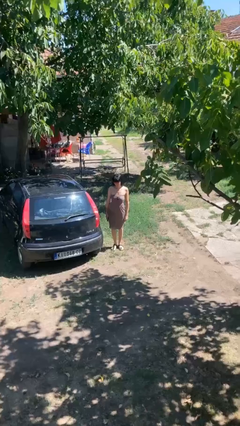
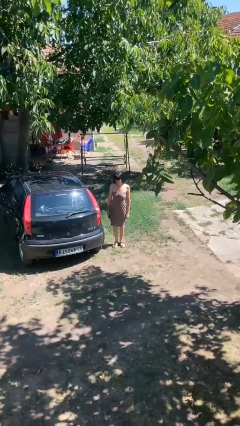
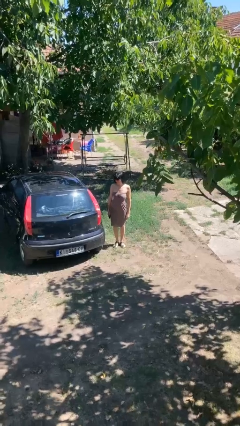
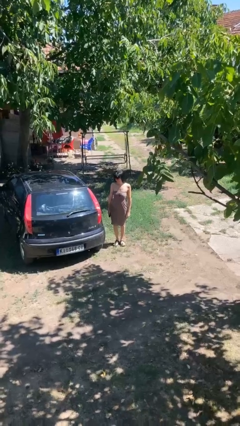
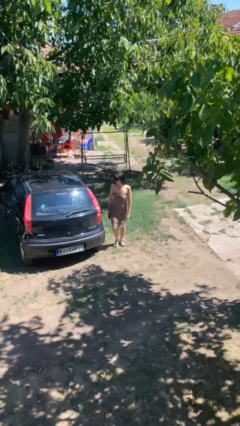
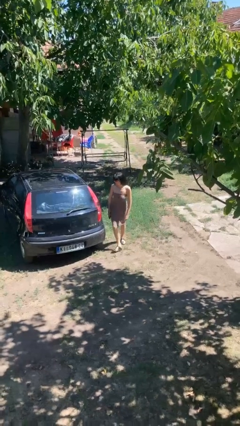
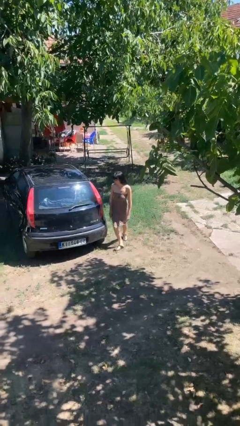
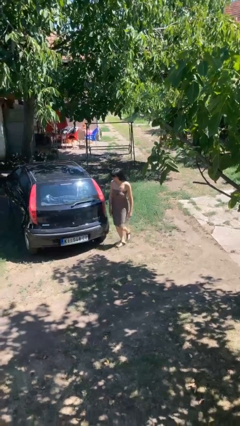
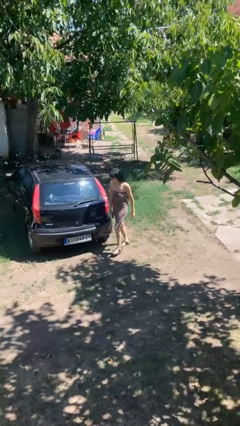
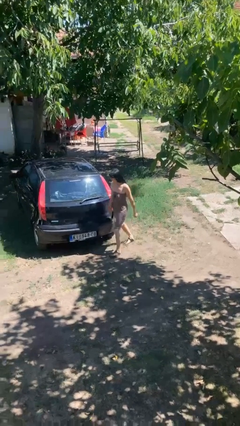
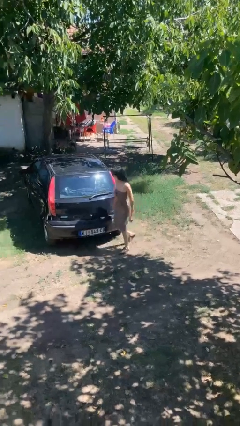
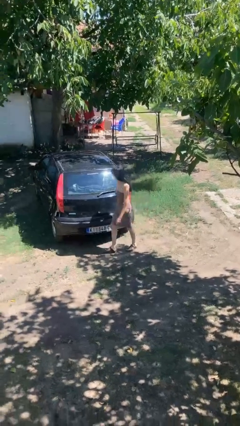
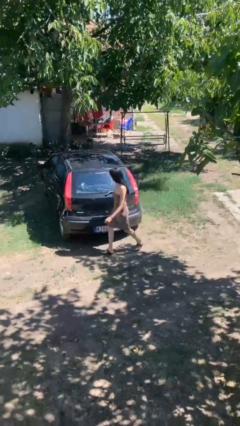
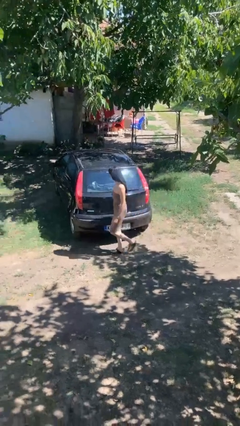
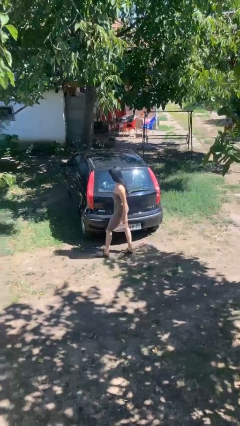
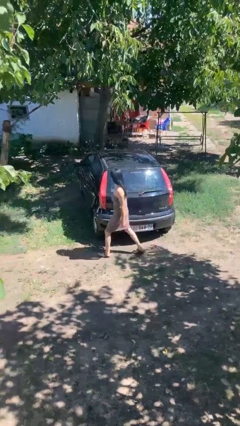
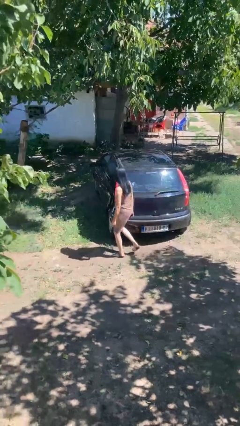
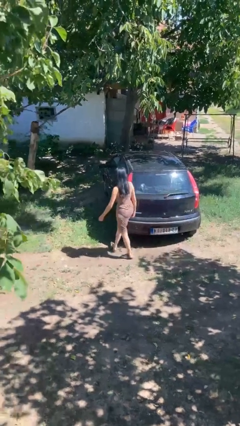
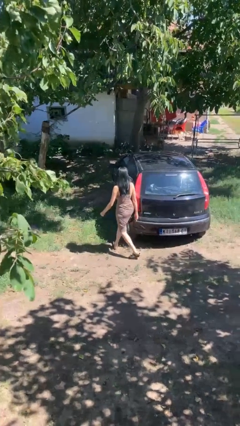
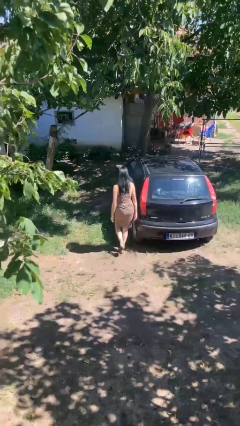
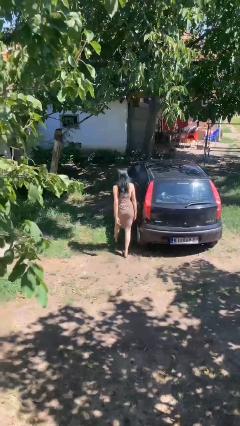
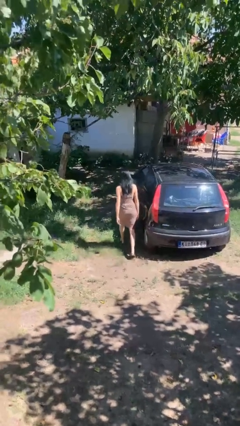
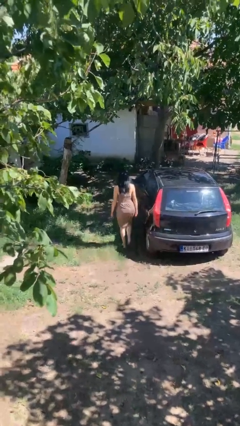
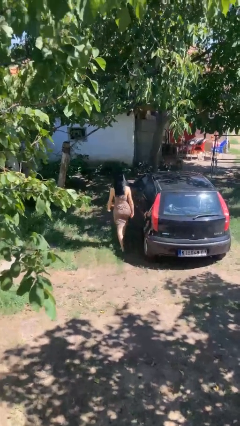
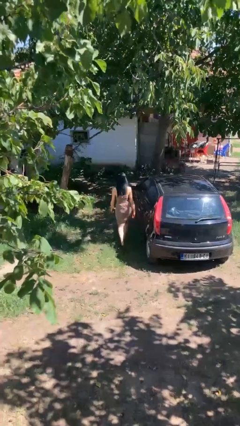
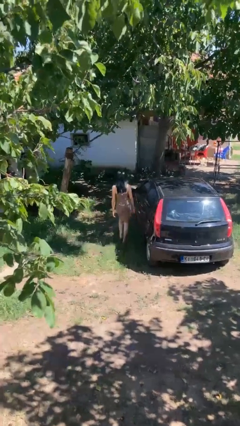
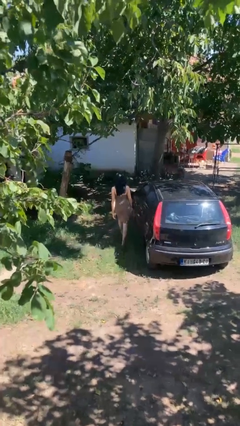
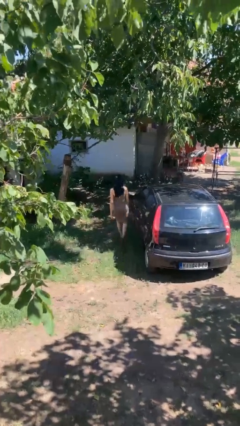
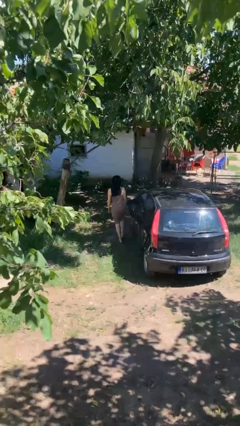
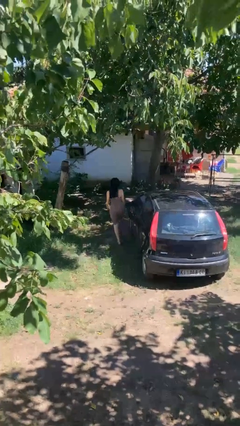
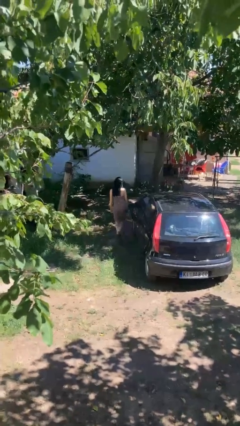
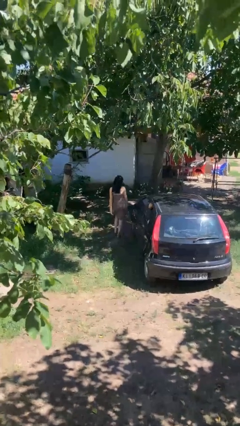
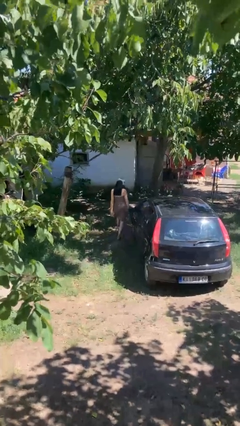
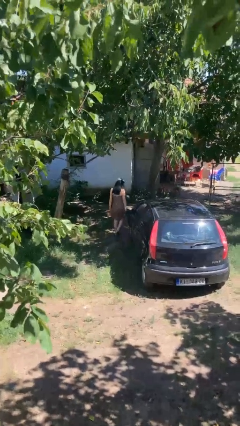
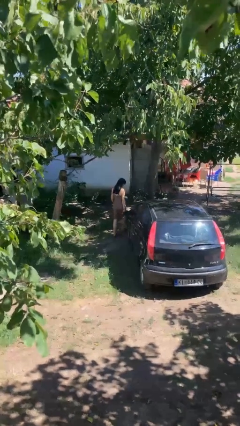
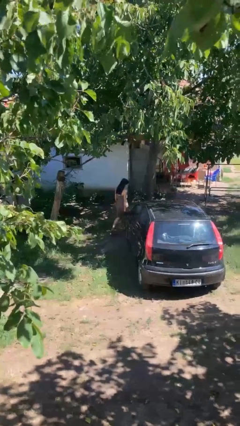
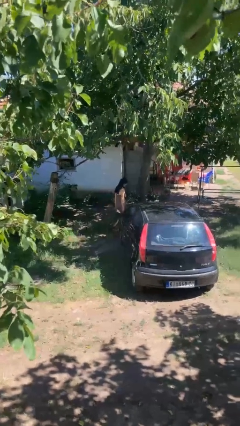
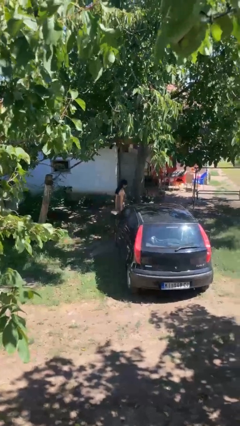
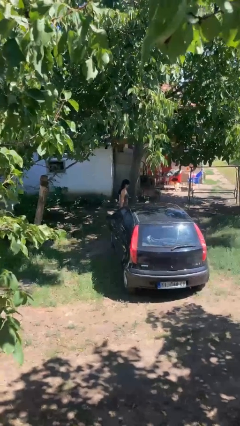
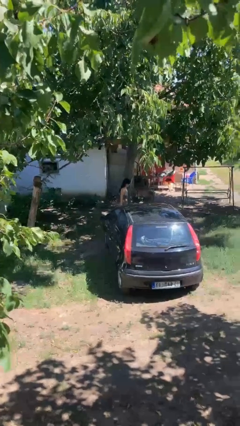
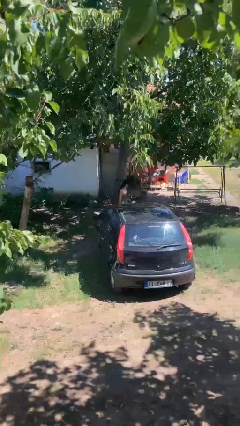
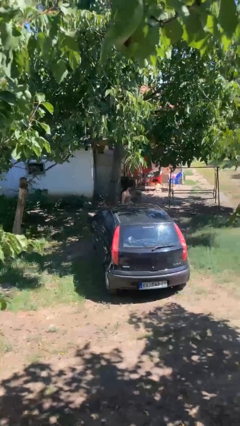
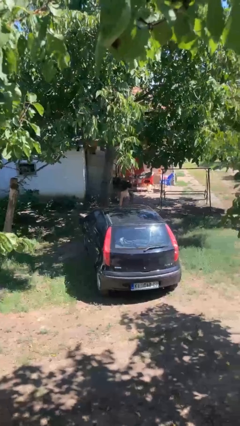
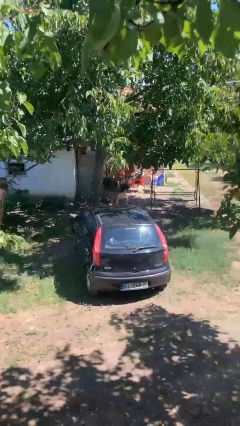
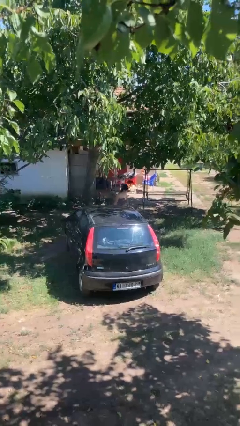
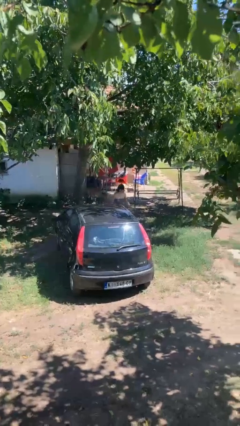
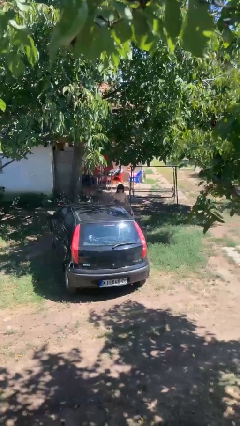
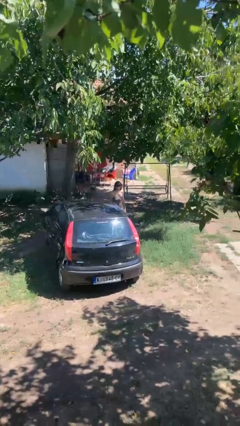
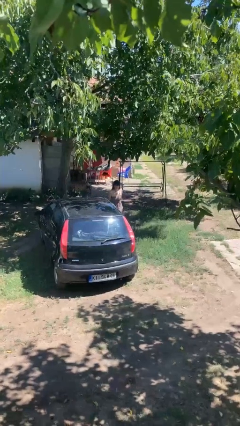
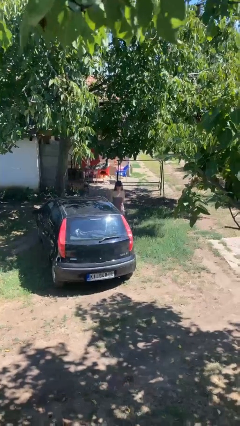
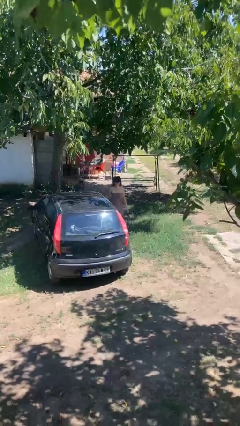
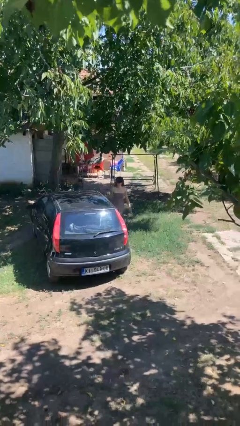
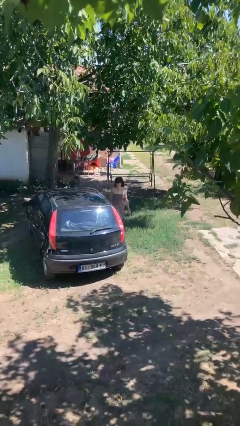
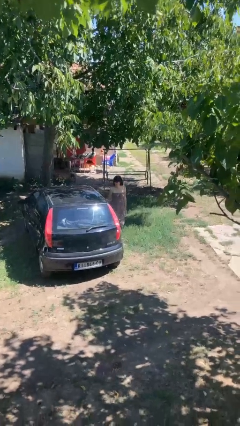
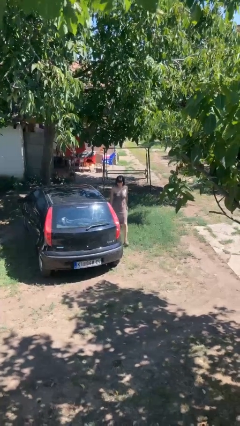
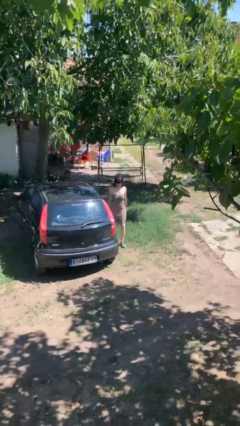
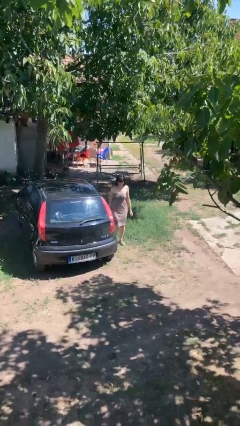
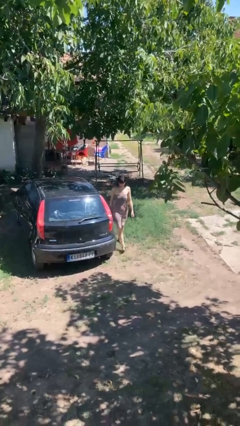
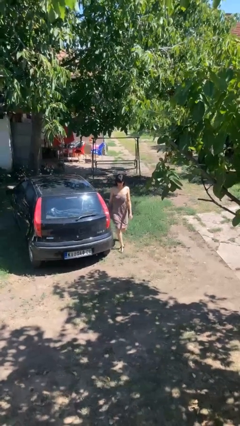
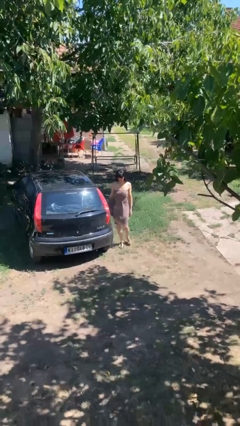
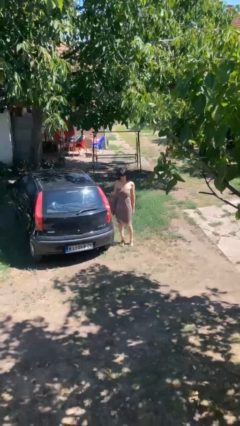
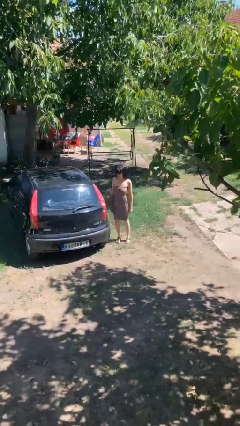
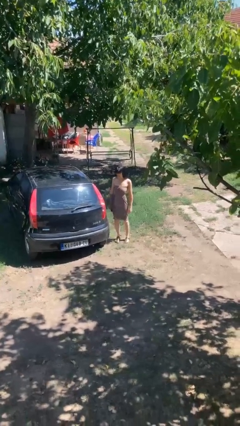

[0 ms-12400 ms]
person walks around car

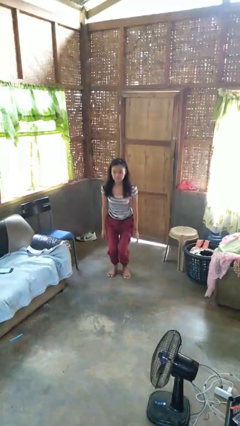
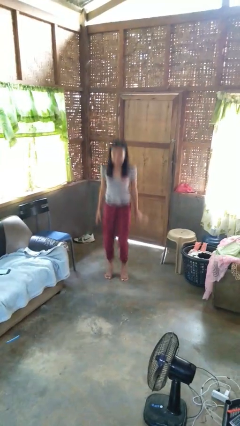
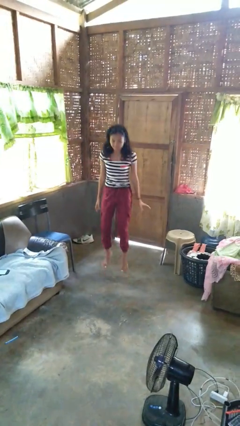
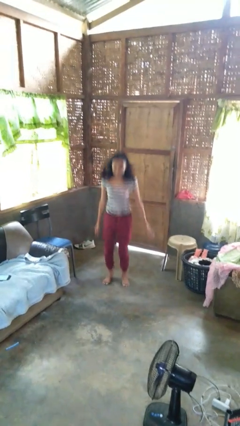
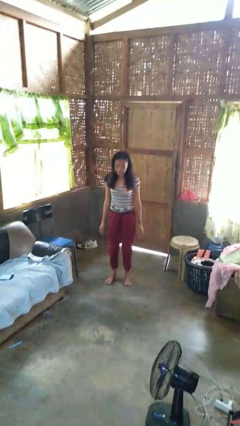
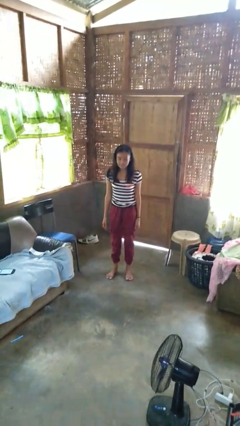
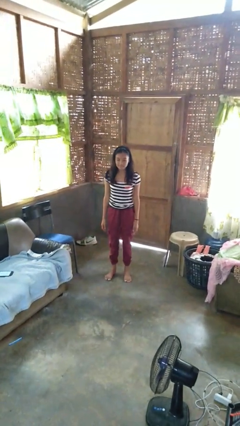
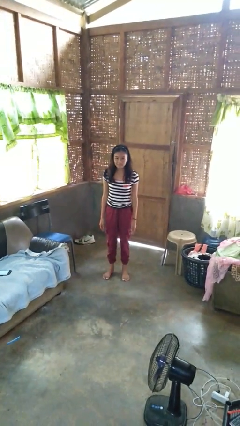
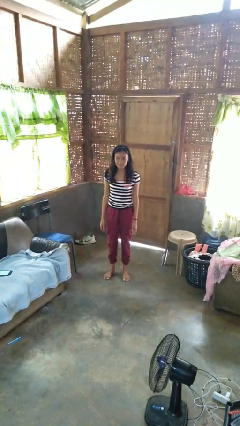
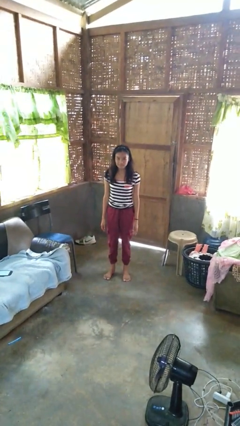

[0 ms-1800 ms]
person jumps

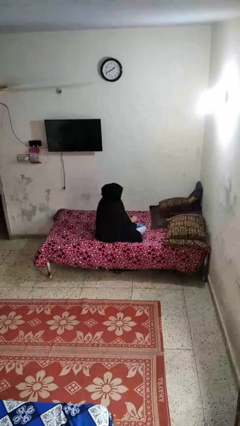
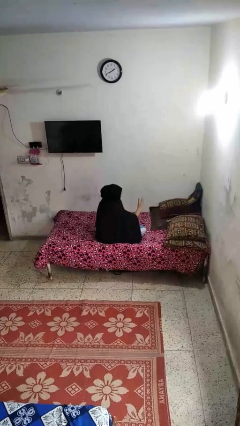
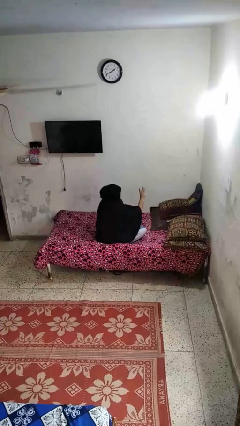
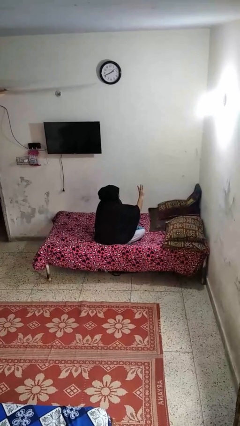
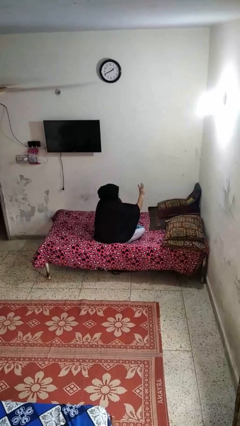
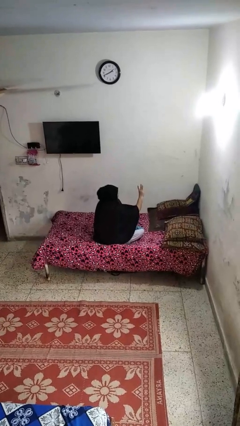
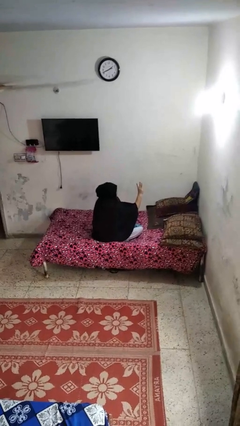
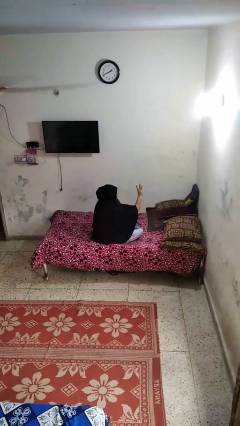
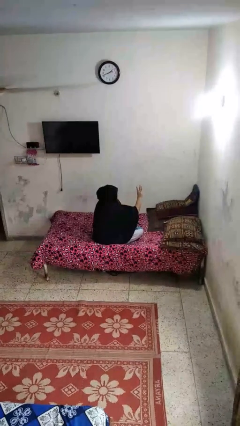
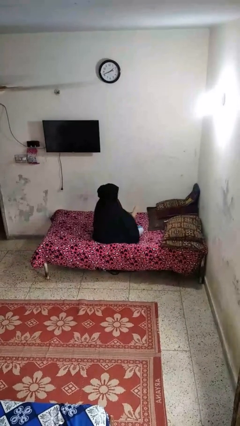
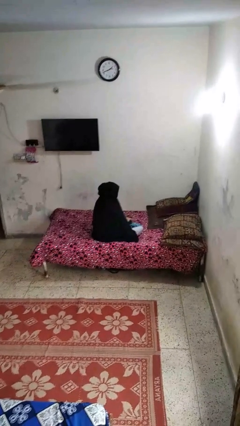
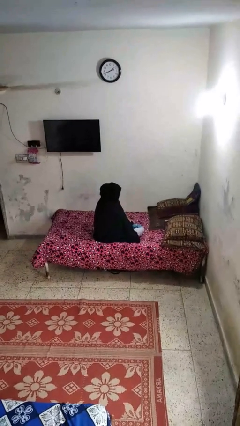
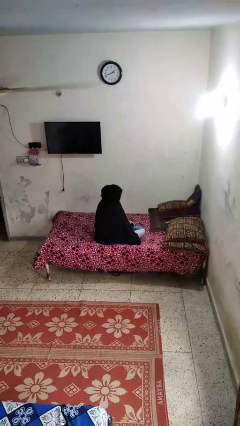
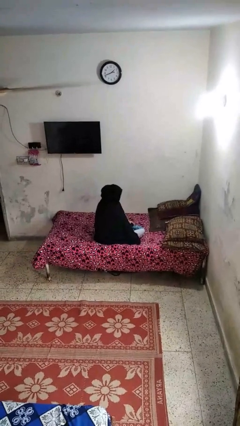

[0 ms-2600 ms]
person gestures number three

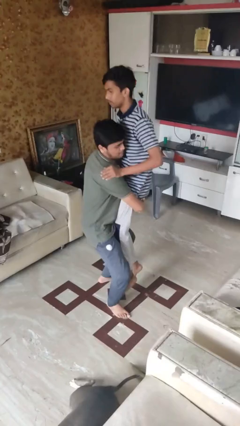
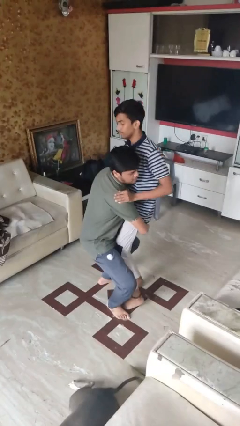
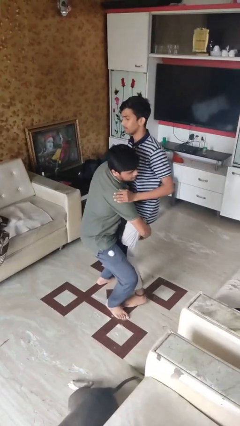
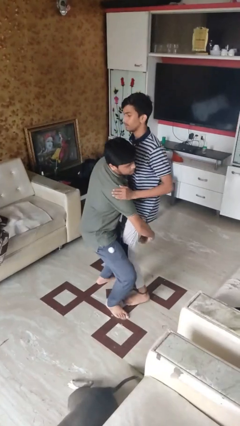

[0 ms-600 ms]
person puts down person

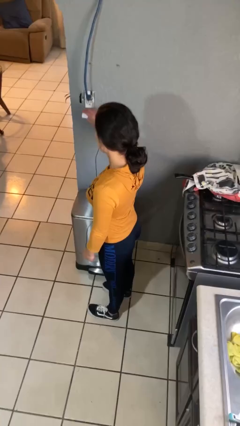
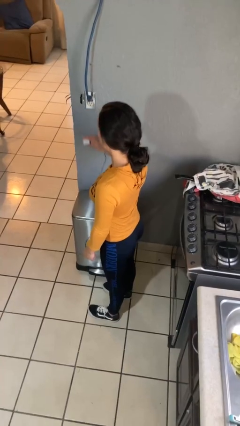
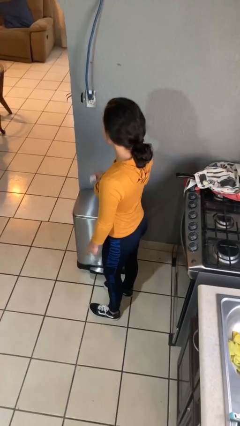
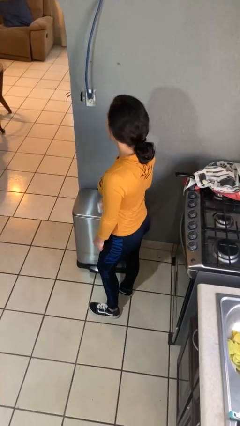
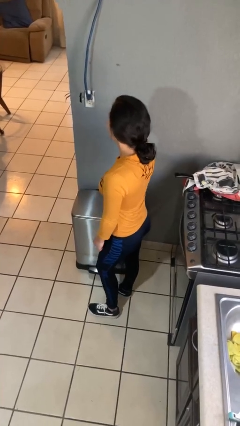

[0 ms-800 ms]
person unplugs from electrical socket
